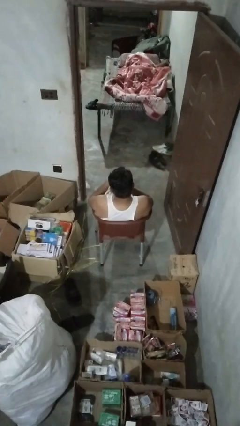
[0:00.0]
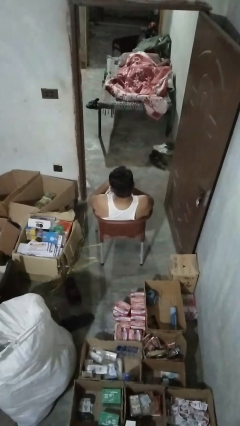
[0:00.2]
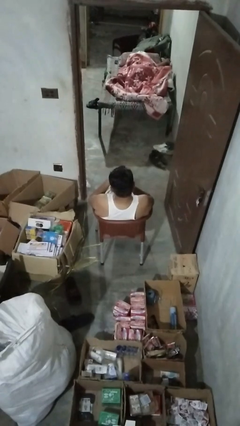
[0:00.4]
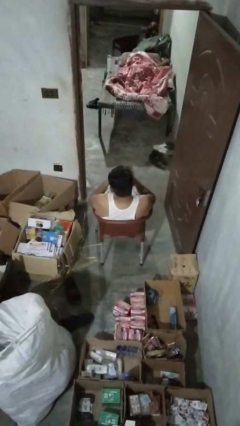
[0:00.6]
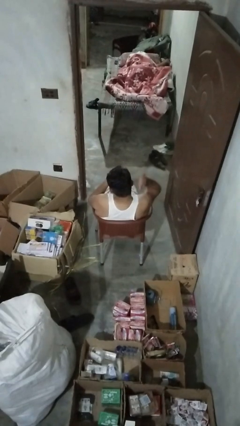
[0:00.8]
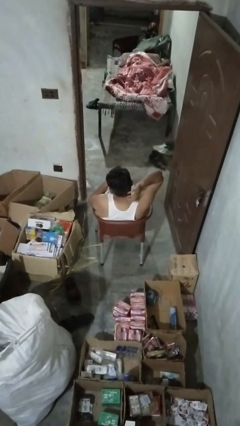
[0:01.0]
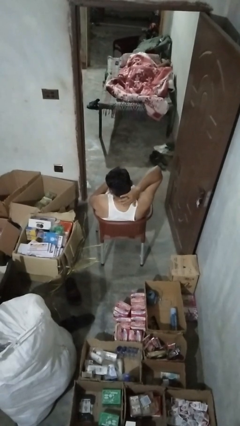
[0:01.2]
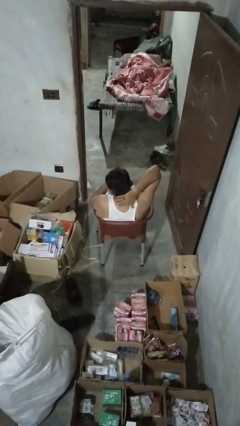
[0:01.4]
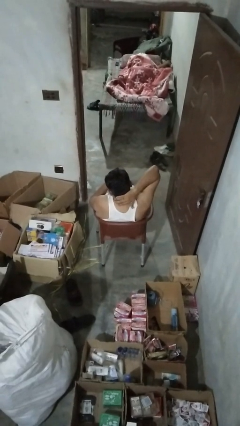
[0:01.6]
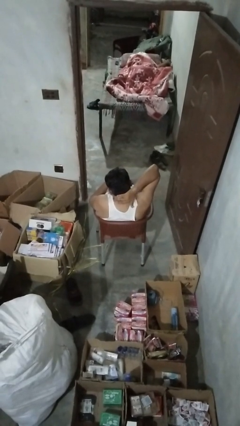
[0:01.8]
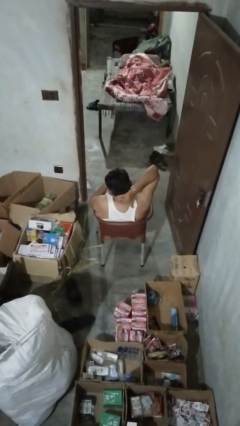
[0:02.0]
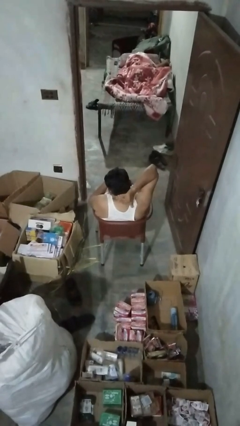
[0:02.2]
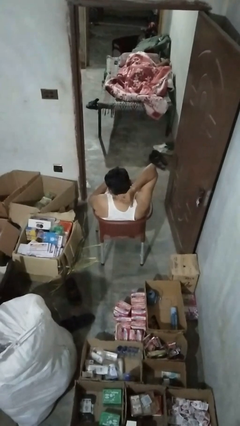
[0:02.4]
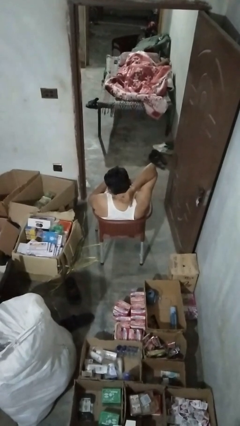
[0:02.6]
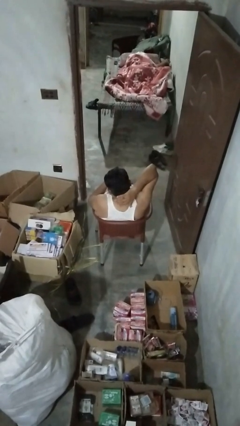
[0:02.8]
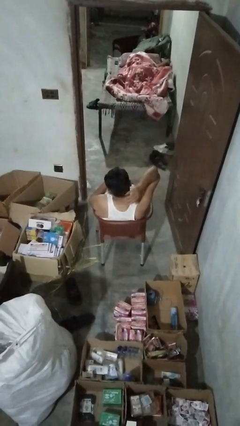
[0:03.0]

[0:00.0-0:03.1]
person rubs neck

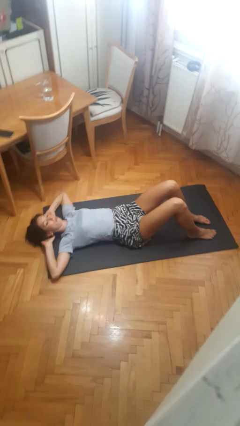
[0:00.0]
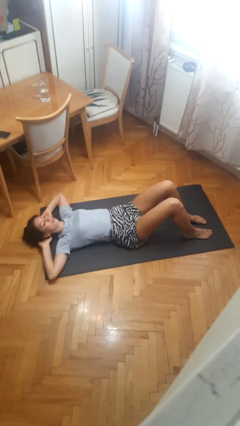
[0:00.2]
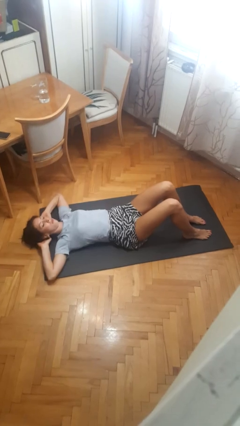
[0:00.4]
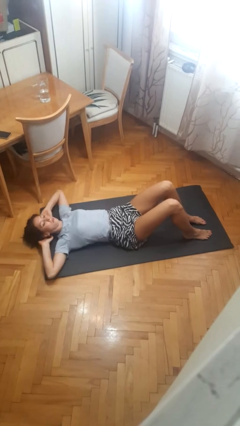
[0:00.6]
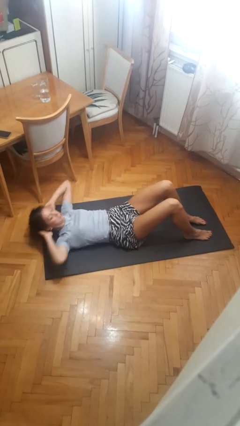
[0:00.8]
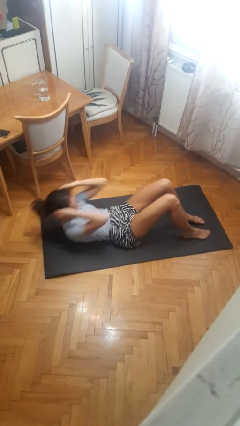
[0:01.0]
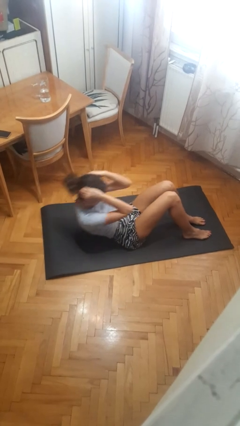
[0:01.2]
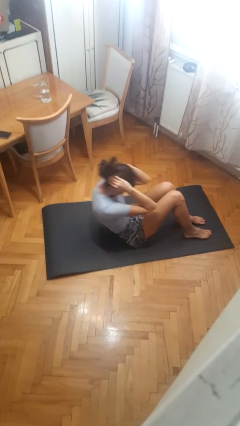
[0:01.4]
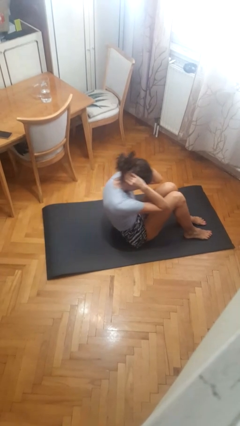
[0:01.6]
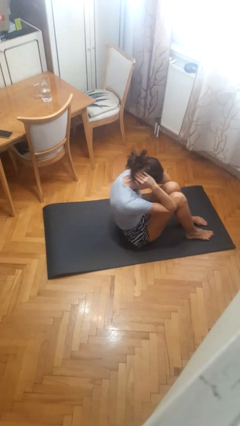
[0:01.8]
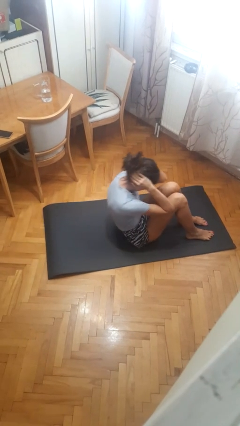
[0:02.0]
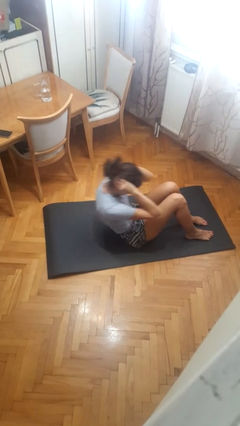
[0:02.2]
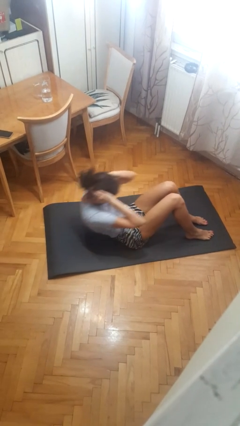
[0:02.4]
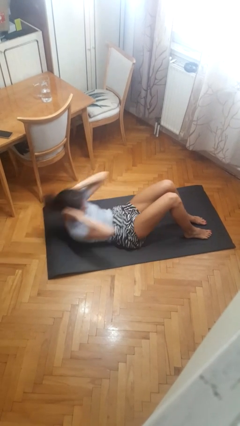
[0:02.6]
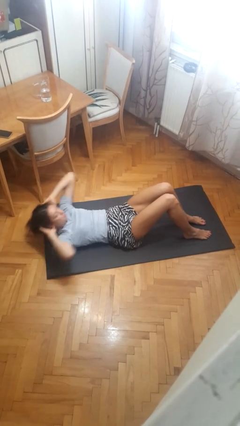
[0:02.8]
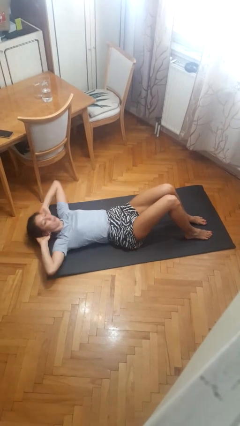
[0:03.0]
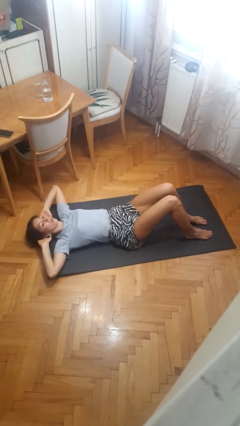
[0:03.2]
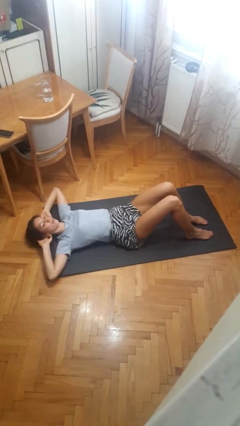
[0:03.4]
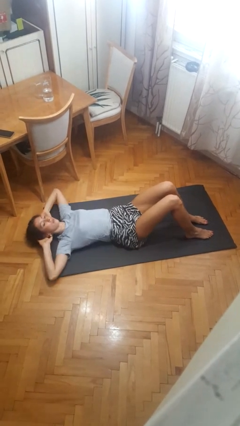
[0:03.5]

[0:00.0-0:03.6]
person exercises with situp

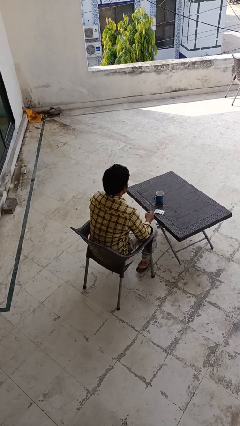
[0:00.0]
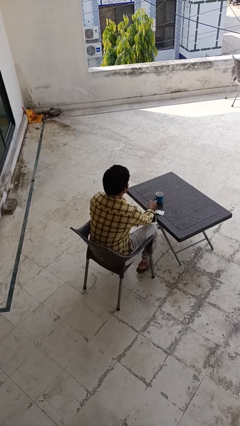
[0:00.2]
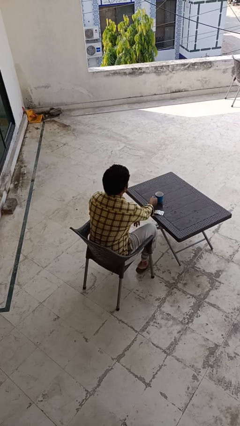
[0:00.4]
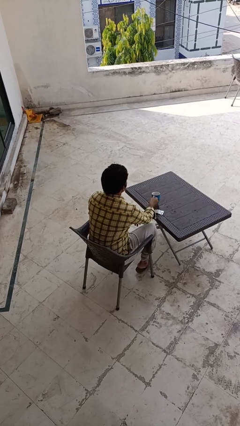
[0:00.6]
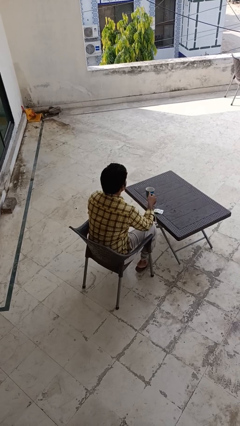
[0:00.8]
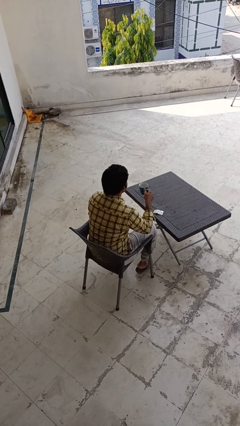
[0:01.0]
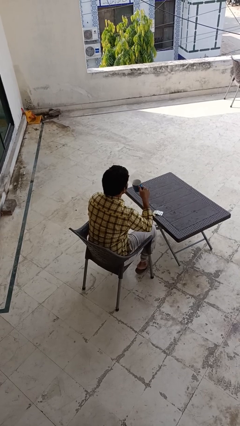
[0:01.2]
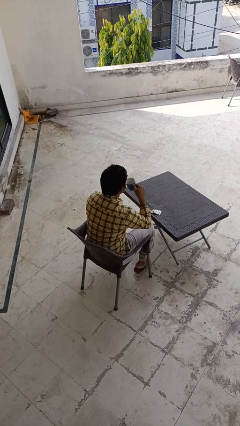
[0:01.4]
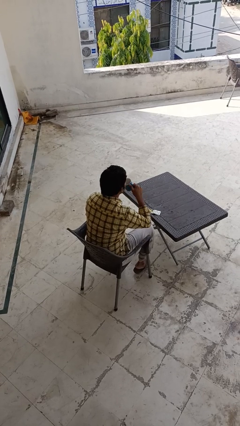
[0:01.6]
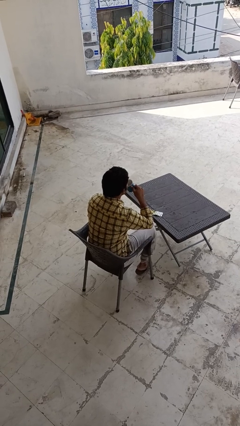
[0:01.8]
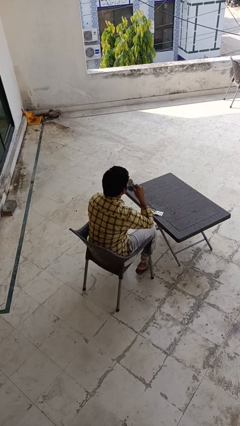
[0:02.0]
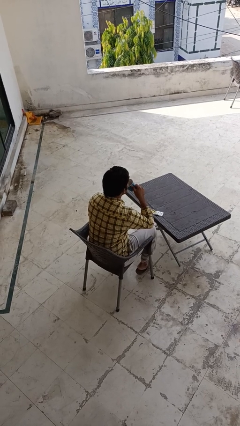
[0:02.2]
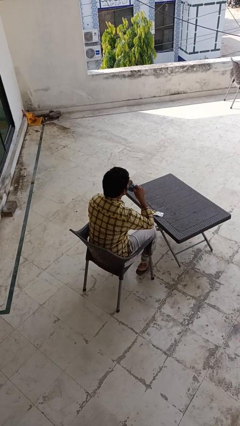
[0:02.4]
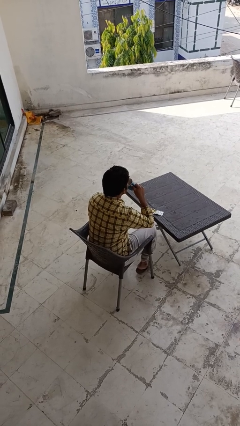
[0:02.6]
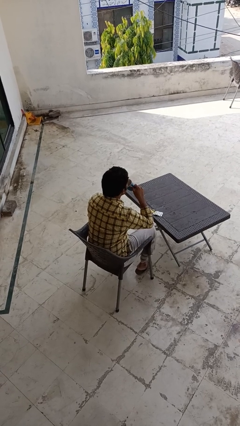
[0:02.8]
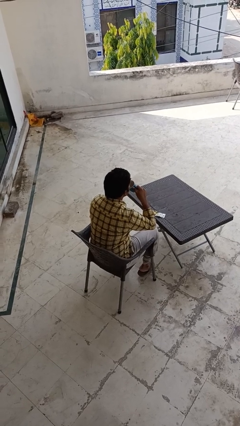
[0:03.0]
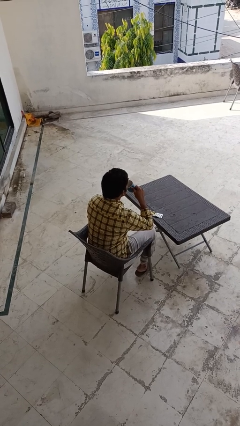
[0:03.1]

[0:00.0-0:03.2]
person drinks from cup

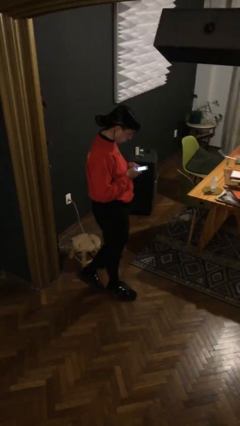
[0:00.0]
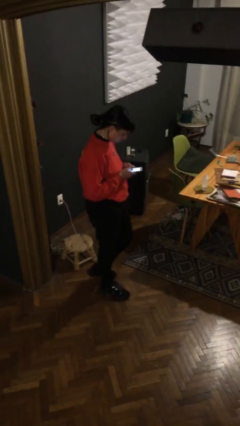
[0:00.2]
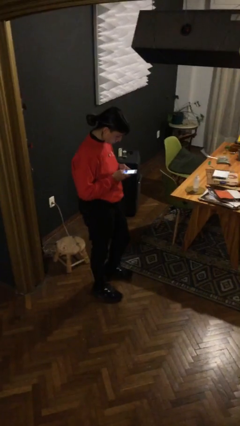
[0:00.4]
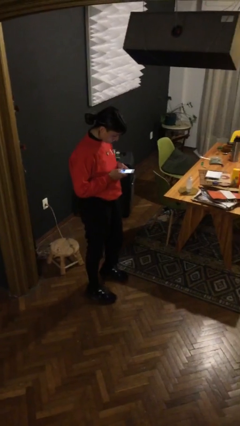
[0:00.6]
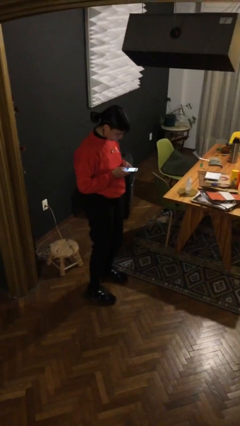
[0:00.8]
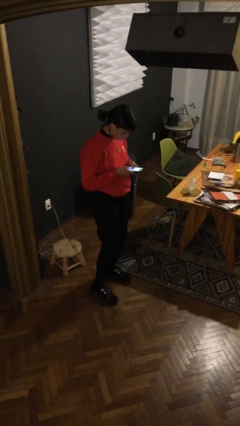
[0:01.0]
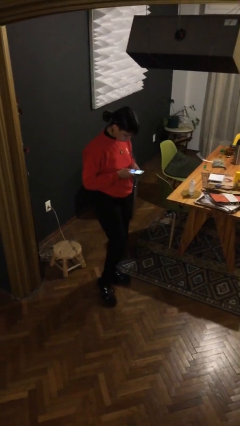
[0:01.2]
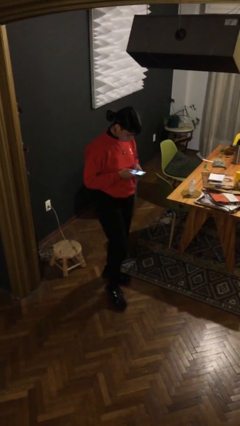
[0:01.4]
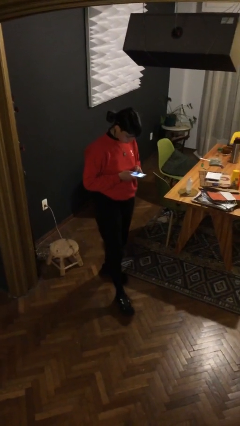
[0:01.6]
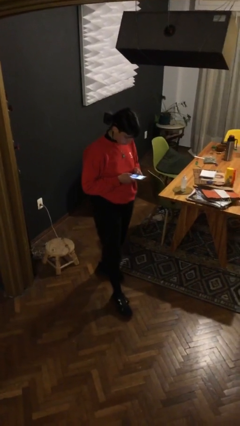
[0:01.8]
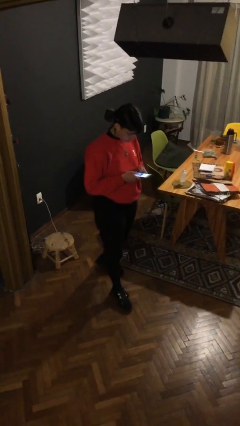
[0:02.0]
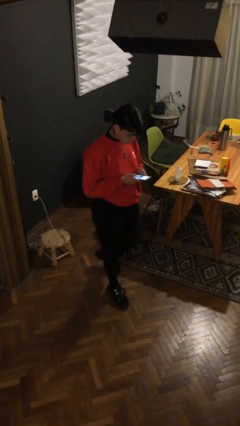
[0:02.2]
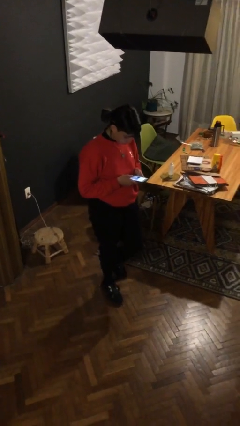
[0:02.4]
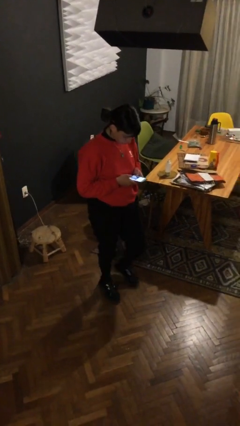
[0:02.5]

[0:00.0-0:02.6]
person texts on phone

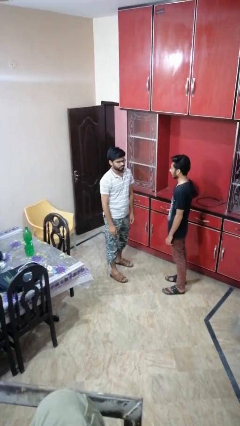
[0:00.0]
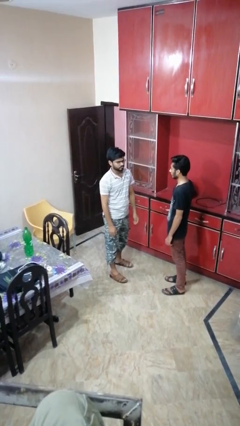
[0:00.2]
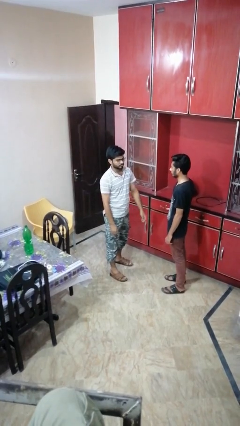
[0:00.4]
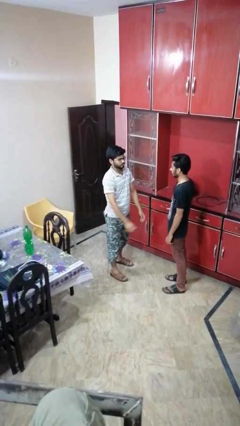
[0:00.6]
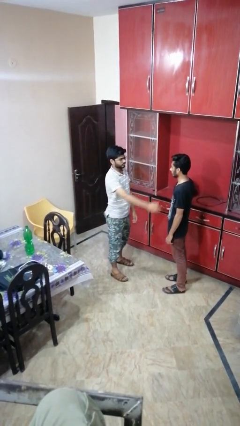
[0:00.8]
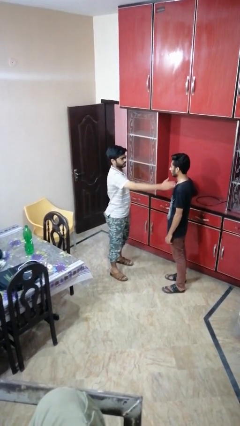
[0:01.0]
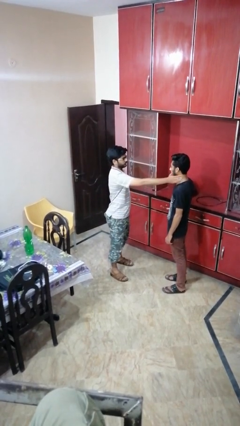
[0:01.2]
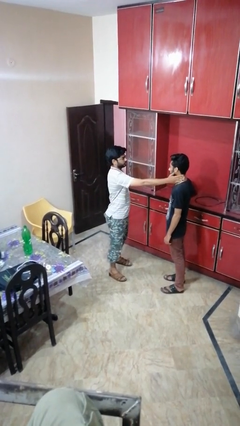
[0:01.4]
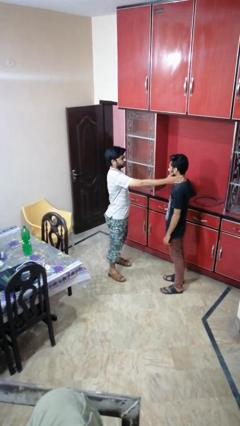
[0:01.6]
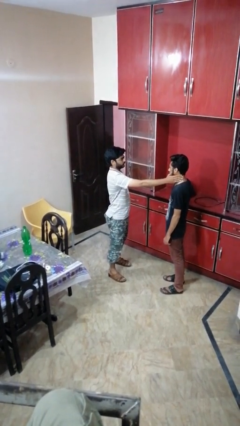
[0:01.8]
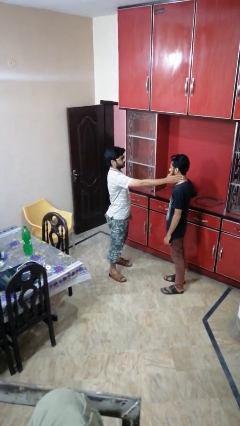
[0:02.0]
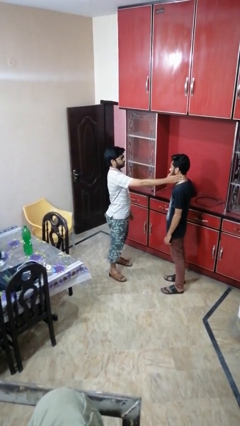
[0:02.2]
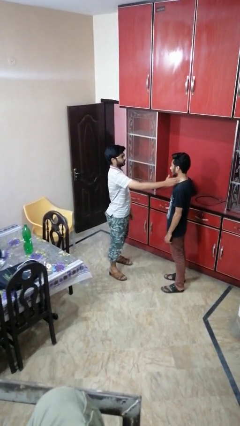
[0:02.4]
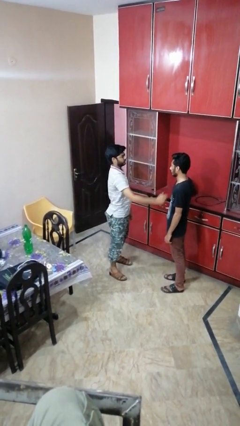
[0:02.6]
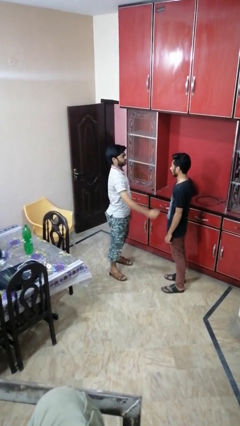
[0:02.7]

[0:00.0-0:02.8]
person touches face of person

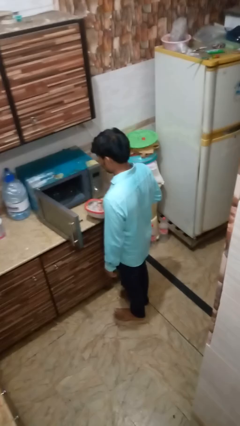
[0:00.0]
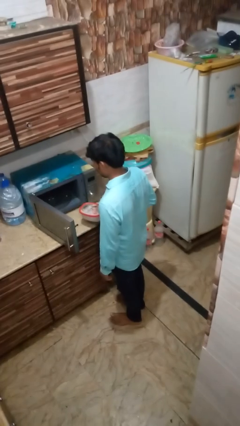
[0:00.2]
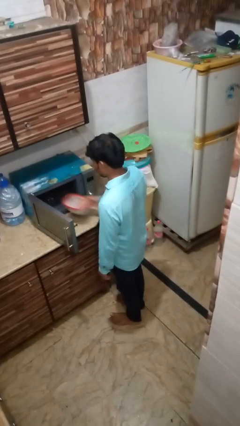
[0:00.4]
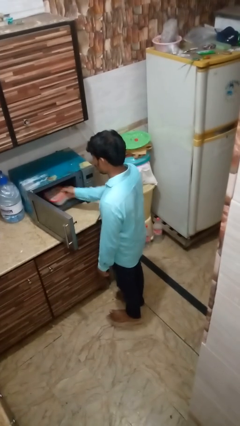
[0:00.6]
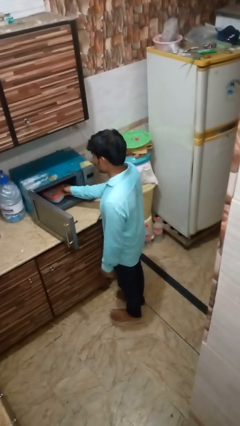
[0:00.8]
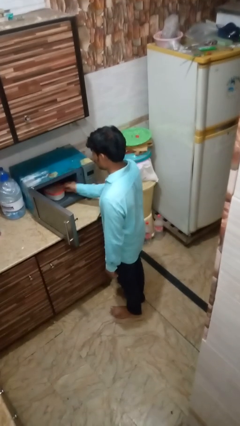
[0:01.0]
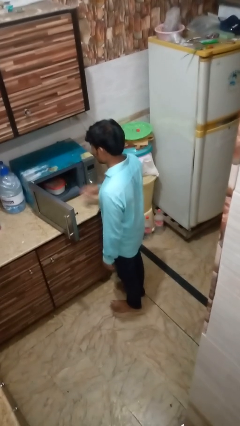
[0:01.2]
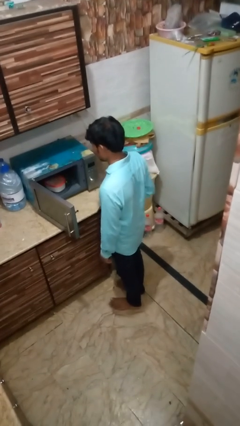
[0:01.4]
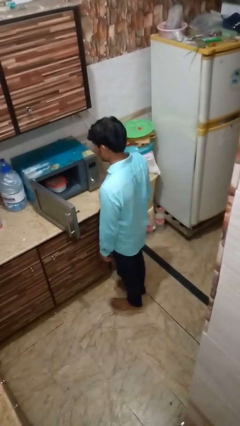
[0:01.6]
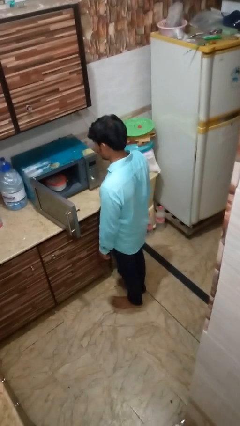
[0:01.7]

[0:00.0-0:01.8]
person puts object into oven

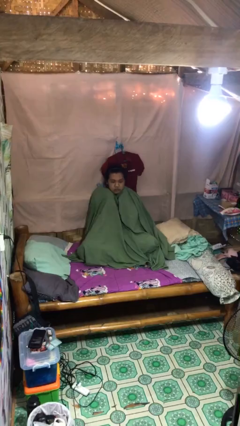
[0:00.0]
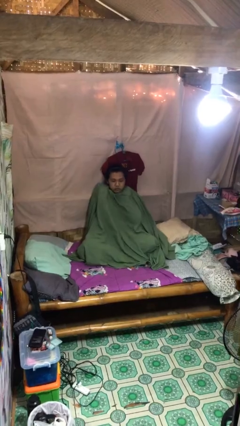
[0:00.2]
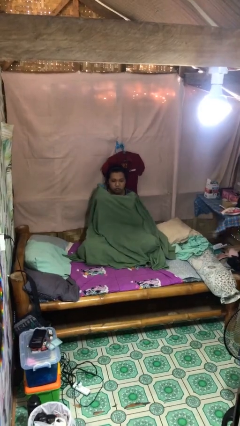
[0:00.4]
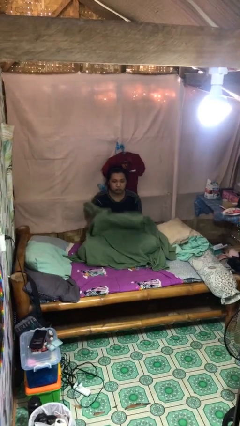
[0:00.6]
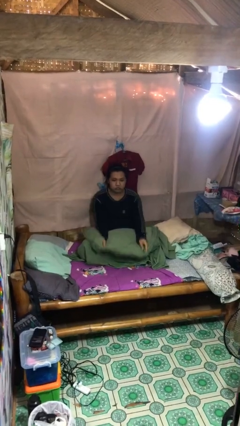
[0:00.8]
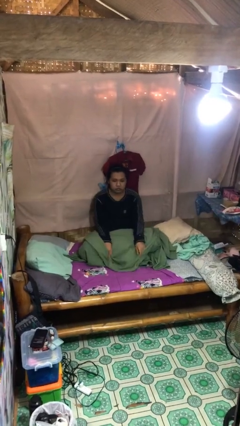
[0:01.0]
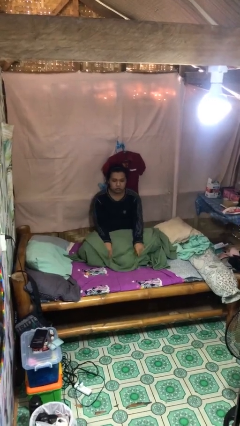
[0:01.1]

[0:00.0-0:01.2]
person uncovers with blanket
